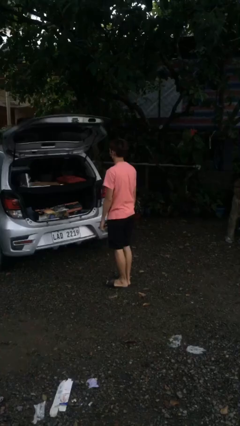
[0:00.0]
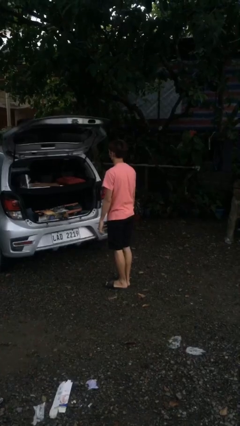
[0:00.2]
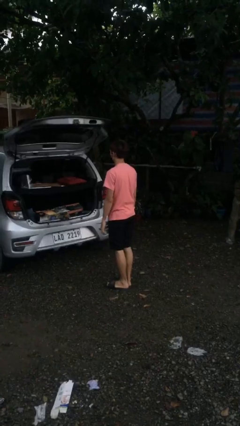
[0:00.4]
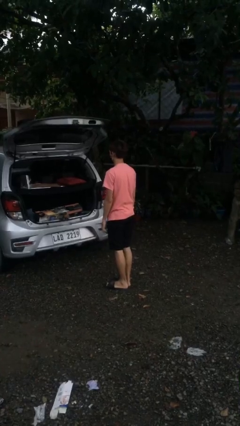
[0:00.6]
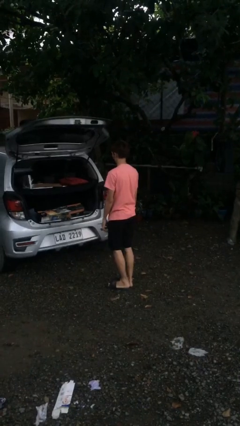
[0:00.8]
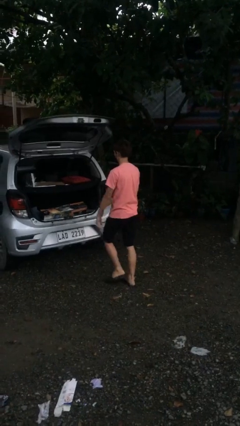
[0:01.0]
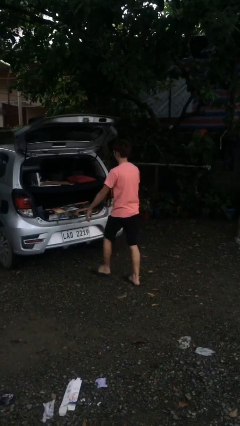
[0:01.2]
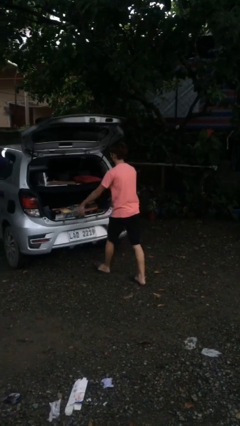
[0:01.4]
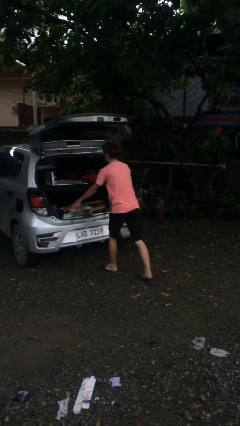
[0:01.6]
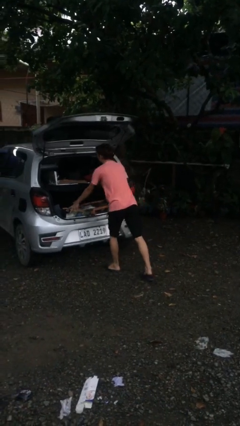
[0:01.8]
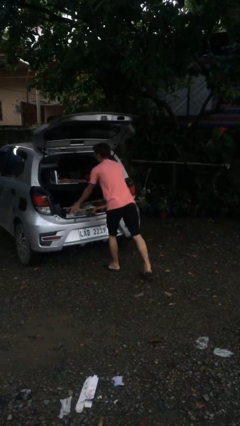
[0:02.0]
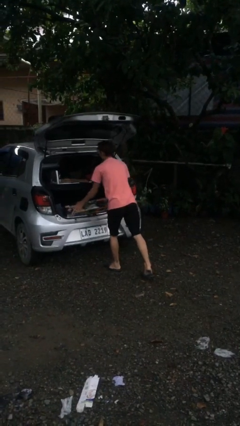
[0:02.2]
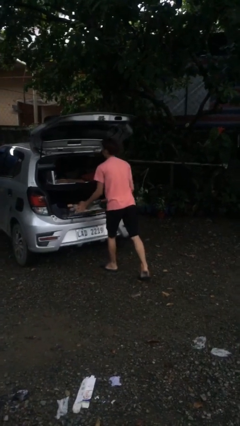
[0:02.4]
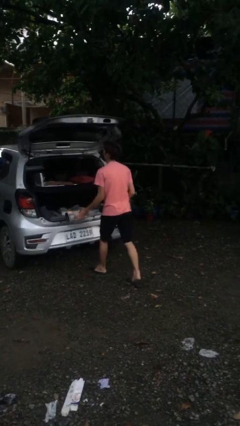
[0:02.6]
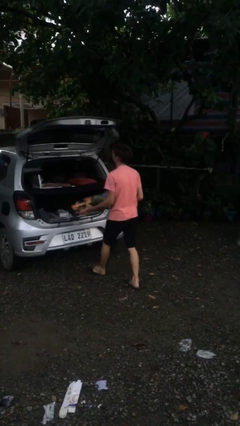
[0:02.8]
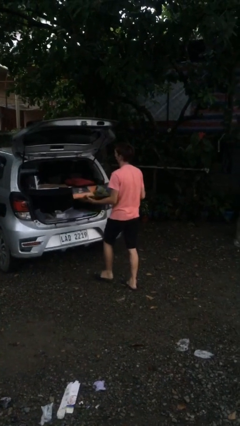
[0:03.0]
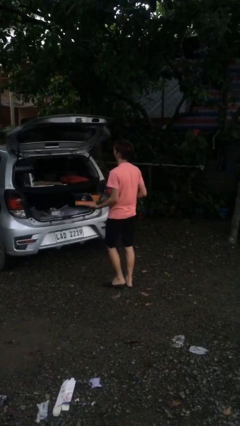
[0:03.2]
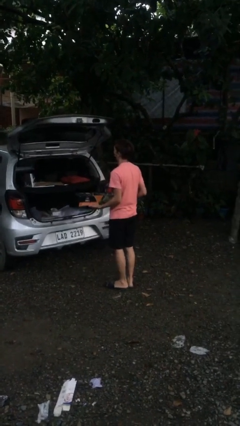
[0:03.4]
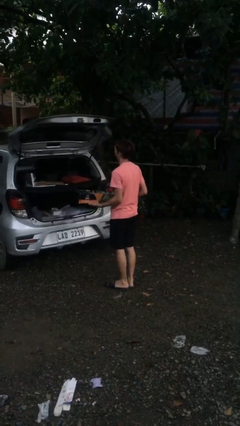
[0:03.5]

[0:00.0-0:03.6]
person unloads car

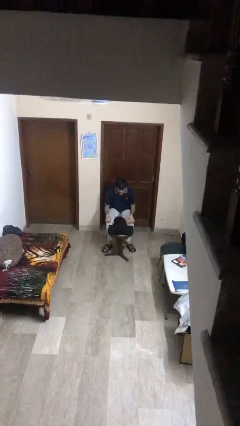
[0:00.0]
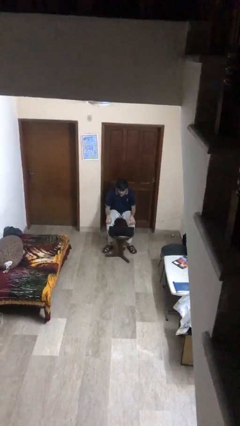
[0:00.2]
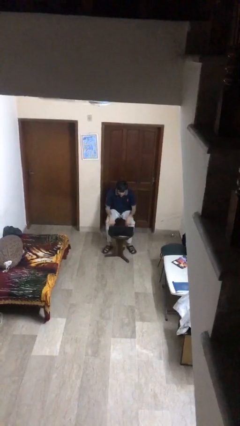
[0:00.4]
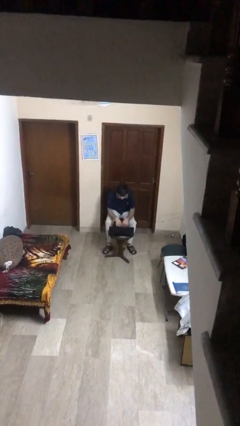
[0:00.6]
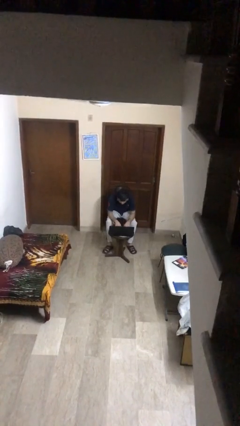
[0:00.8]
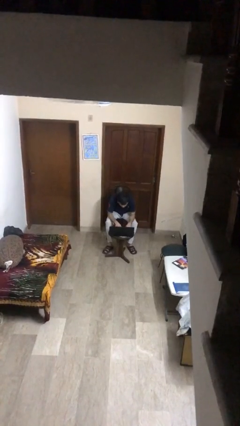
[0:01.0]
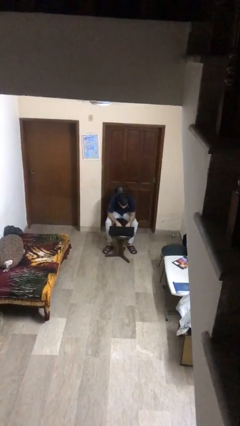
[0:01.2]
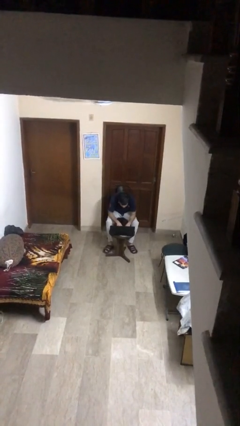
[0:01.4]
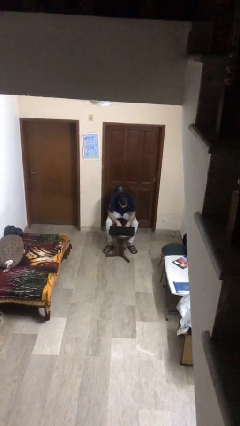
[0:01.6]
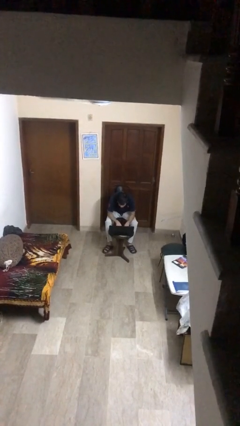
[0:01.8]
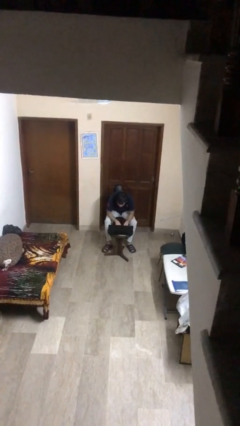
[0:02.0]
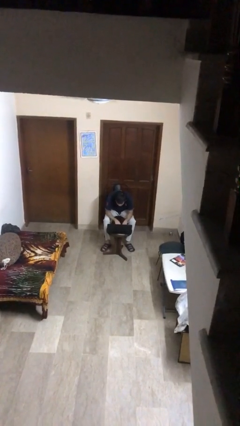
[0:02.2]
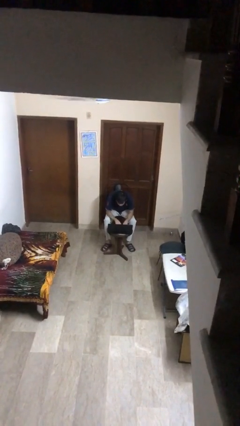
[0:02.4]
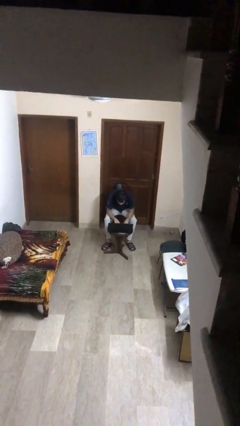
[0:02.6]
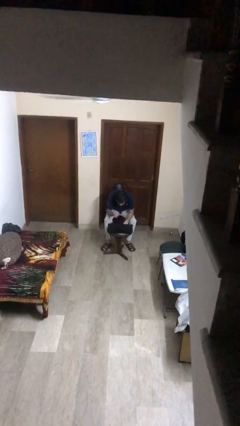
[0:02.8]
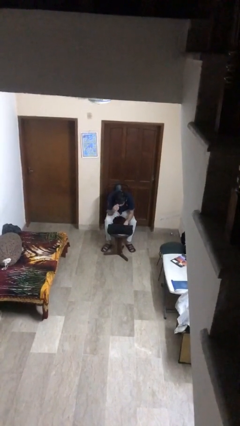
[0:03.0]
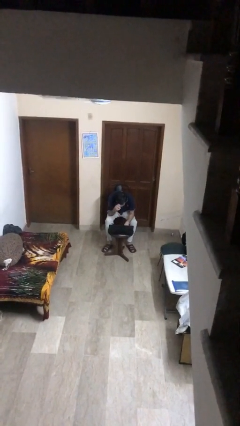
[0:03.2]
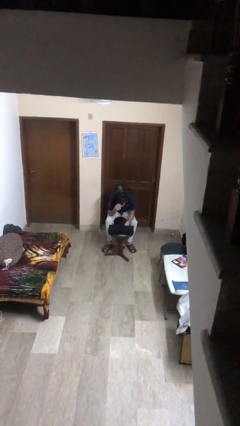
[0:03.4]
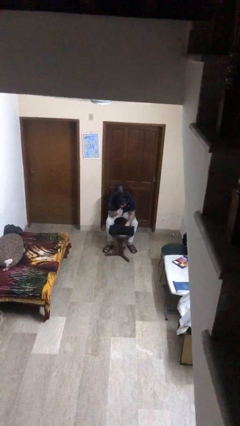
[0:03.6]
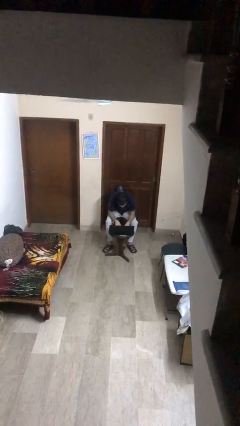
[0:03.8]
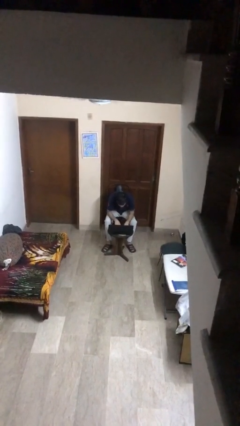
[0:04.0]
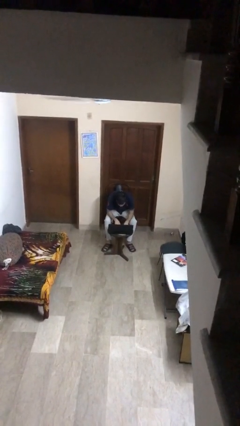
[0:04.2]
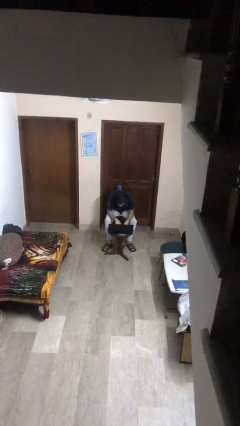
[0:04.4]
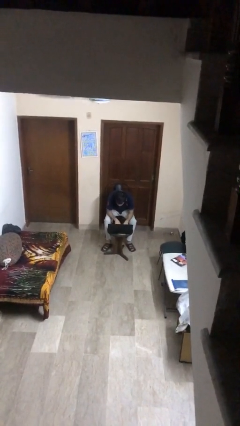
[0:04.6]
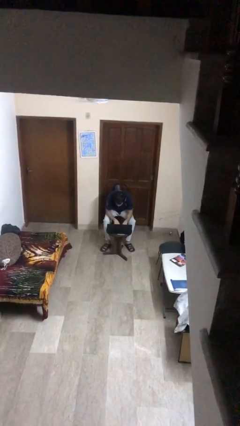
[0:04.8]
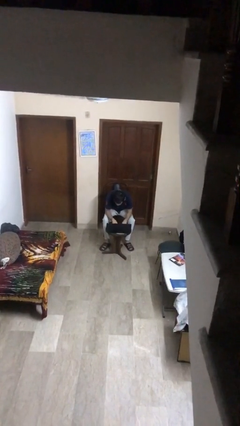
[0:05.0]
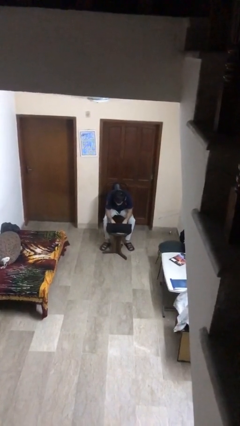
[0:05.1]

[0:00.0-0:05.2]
person interacts with laptop

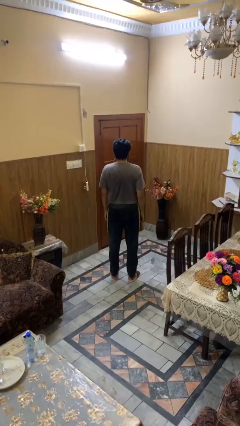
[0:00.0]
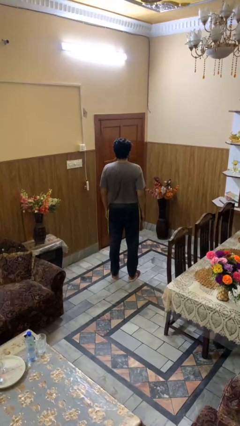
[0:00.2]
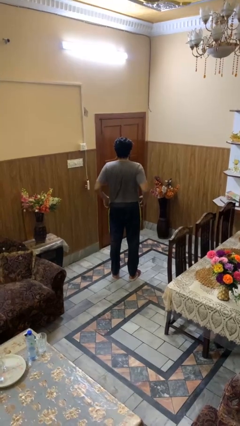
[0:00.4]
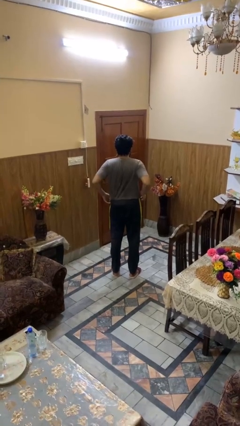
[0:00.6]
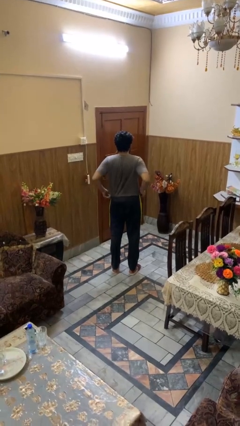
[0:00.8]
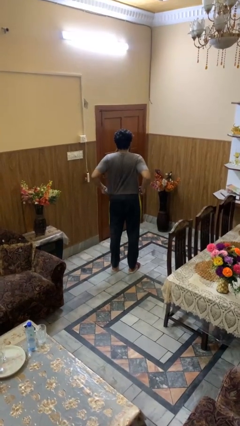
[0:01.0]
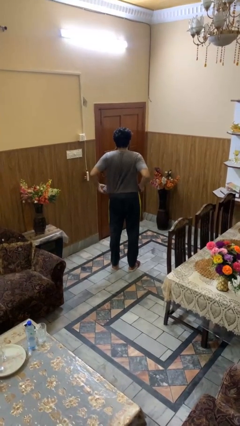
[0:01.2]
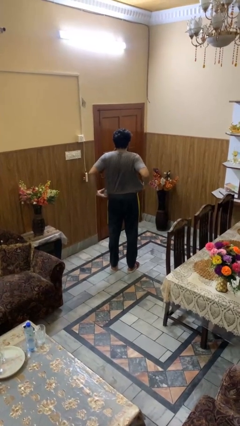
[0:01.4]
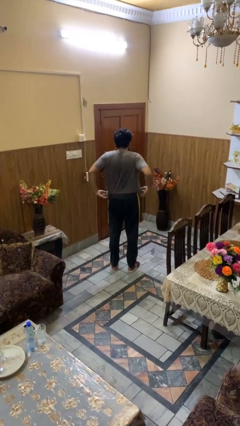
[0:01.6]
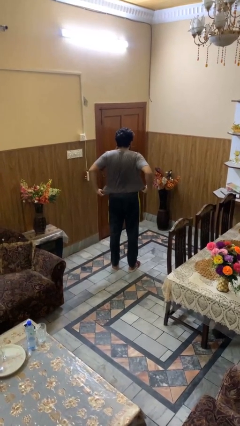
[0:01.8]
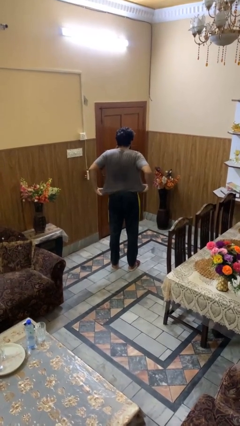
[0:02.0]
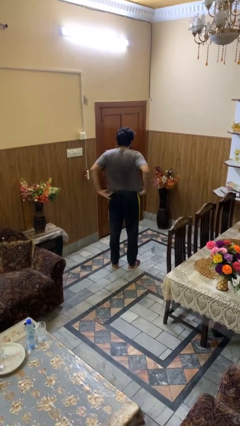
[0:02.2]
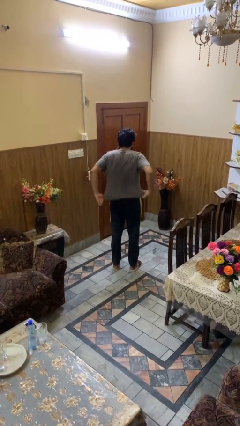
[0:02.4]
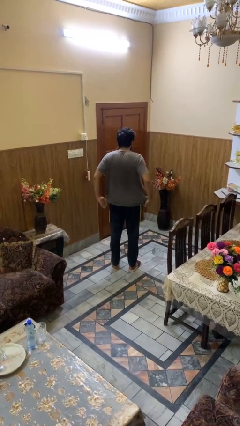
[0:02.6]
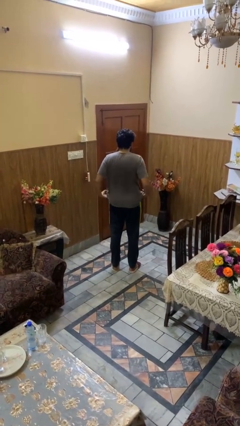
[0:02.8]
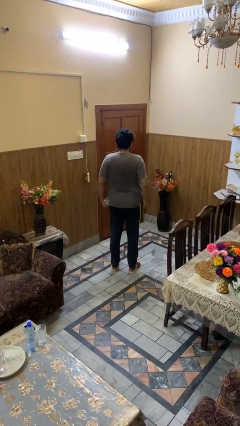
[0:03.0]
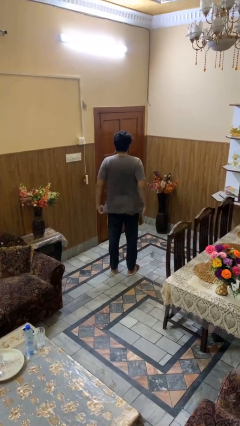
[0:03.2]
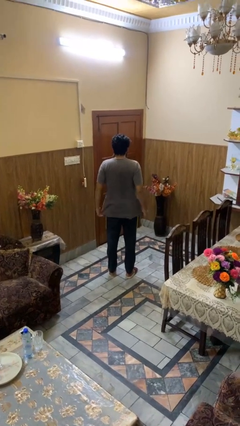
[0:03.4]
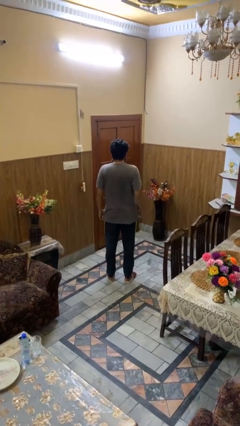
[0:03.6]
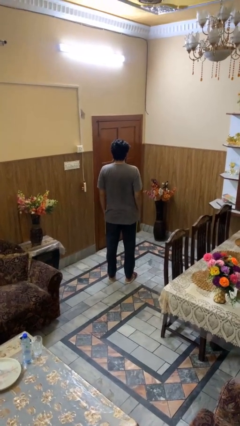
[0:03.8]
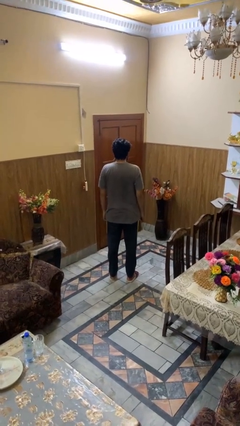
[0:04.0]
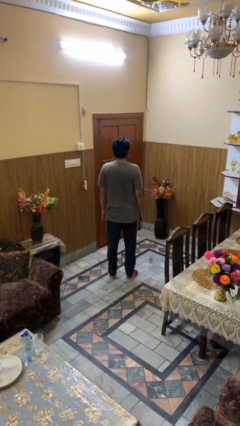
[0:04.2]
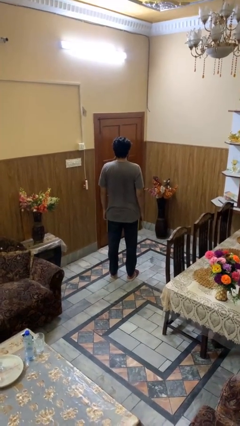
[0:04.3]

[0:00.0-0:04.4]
person untucks shirt

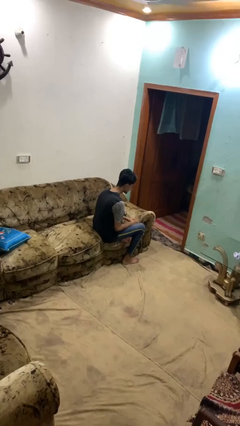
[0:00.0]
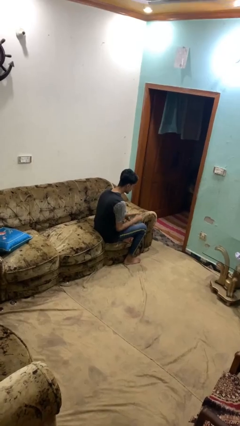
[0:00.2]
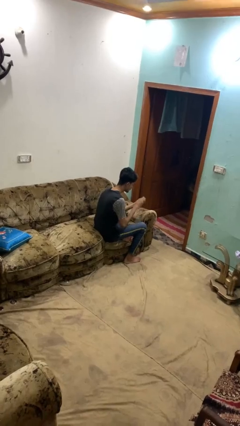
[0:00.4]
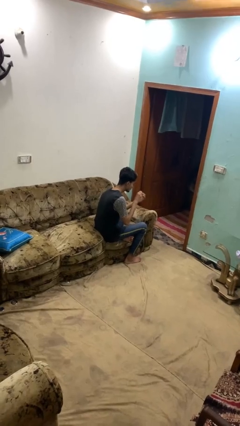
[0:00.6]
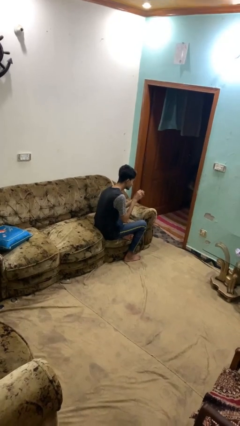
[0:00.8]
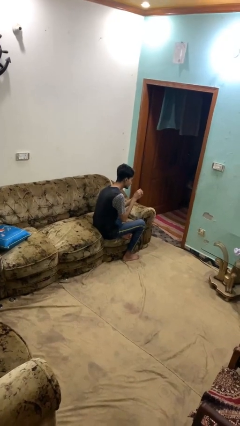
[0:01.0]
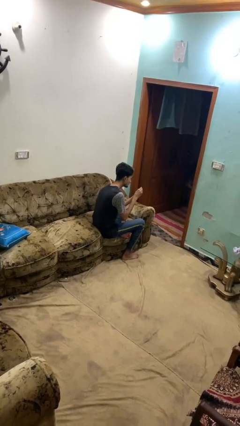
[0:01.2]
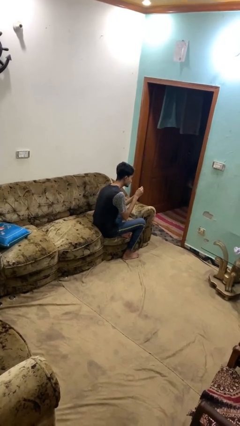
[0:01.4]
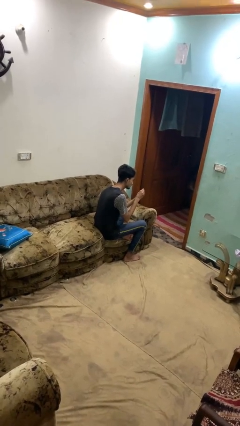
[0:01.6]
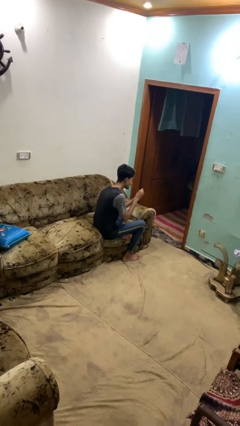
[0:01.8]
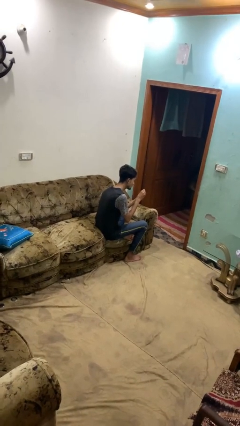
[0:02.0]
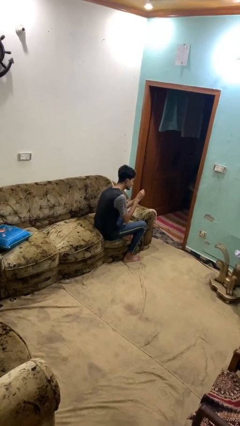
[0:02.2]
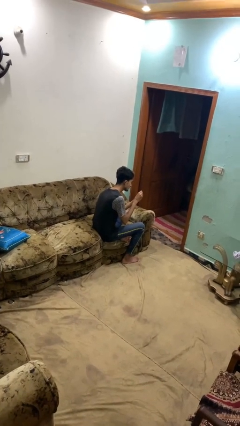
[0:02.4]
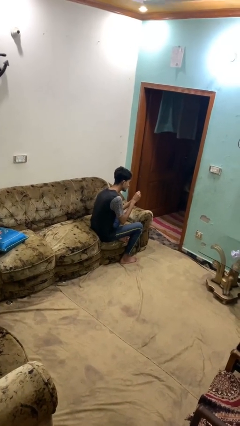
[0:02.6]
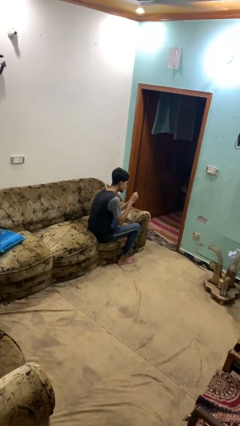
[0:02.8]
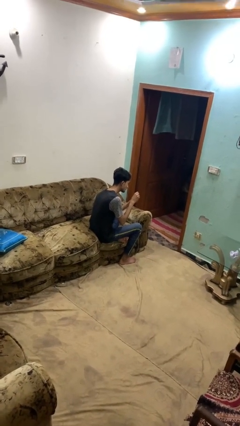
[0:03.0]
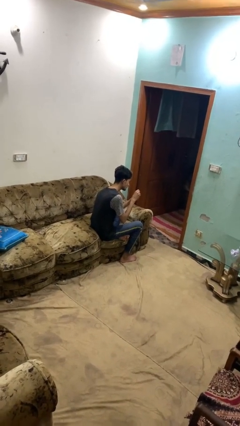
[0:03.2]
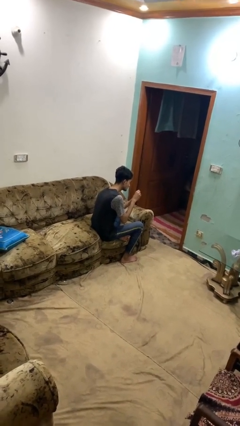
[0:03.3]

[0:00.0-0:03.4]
person clips fingernails

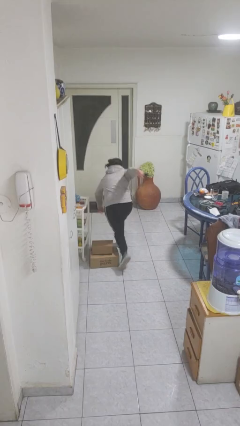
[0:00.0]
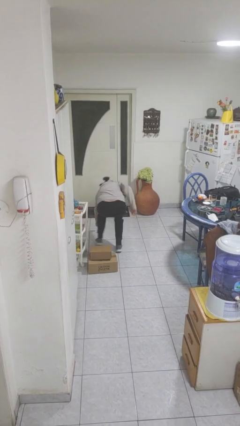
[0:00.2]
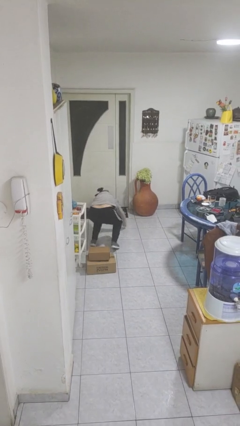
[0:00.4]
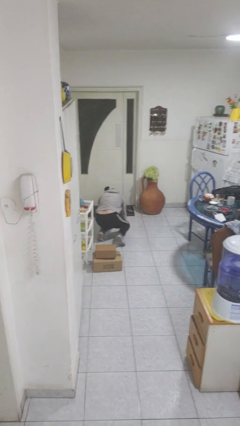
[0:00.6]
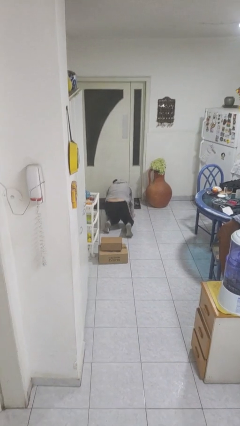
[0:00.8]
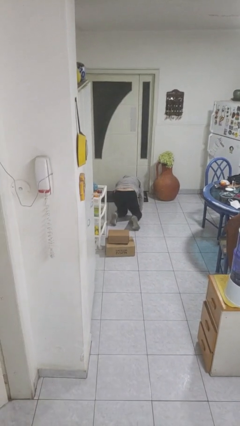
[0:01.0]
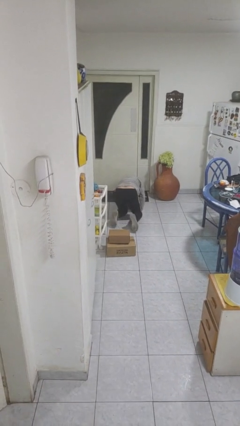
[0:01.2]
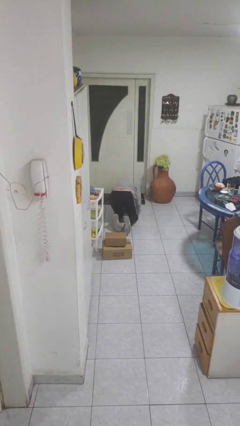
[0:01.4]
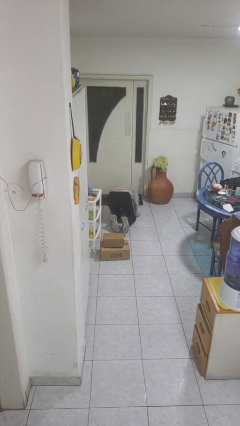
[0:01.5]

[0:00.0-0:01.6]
person trips on object on floor
